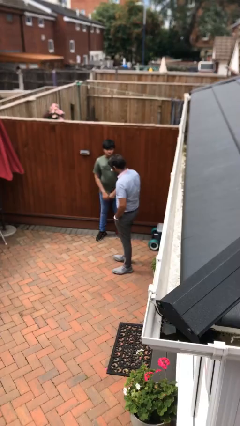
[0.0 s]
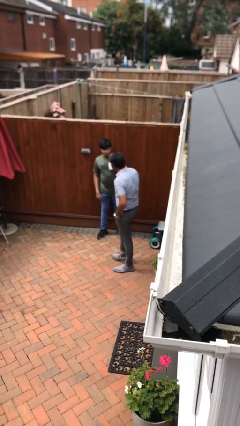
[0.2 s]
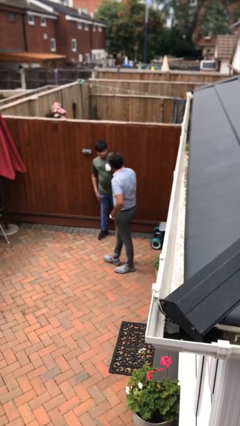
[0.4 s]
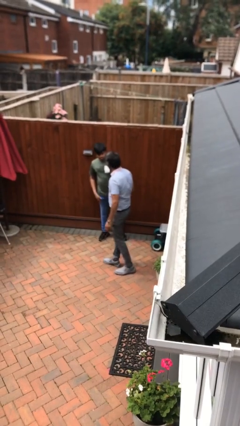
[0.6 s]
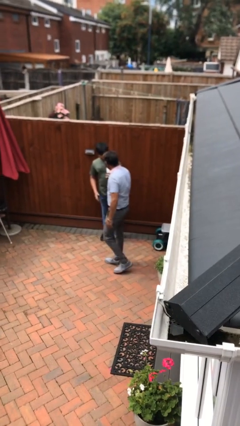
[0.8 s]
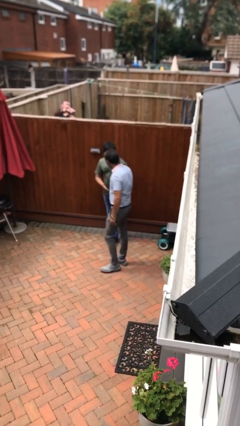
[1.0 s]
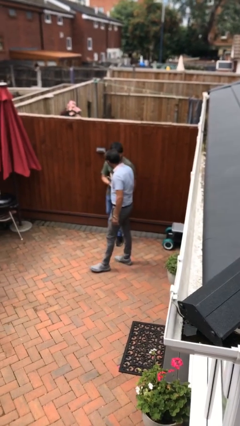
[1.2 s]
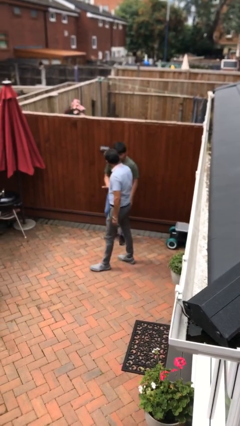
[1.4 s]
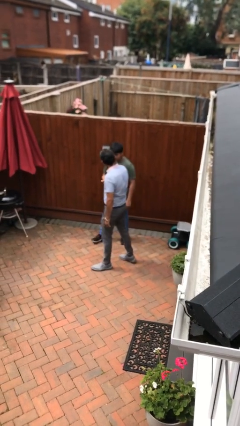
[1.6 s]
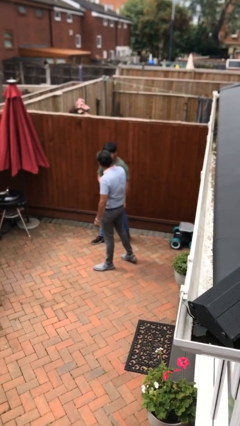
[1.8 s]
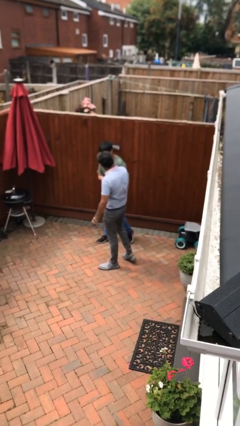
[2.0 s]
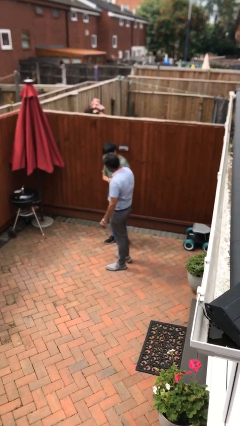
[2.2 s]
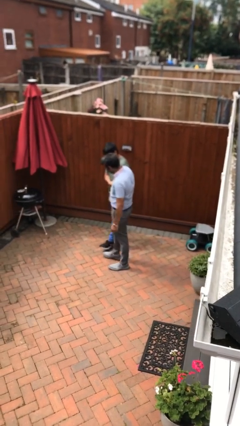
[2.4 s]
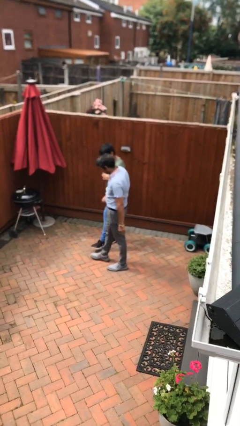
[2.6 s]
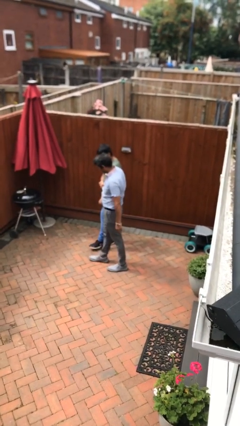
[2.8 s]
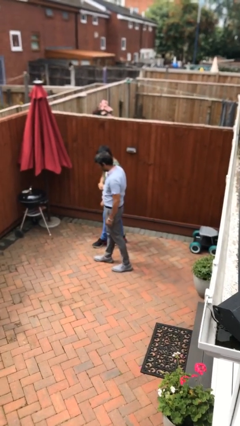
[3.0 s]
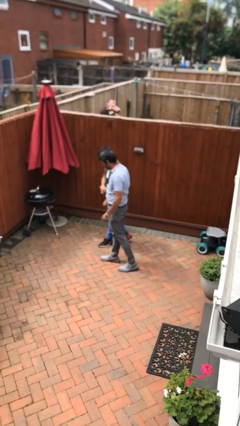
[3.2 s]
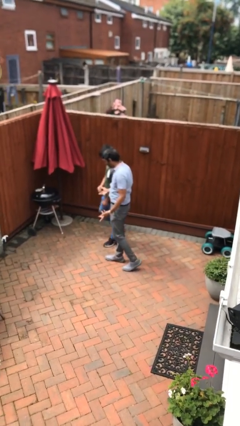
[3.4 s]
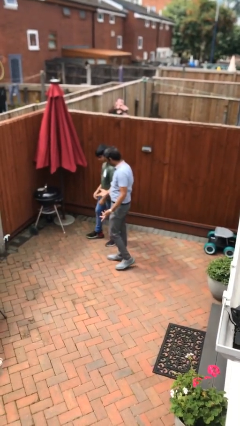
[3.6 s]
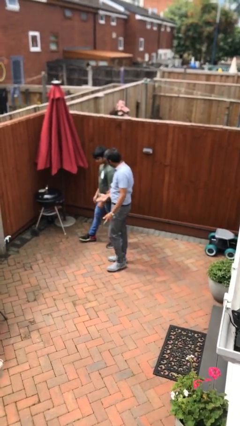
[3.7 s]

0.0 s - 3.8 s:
person shakes hand

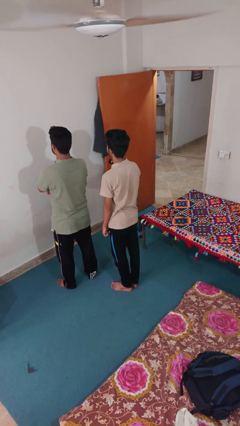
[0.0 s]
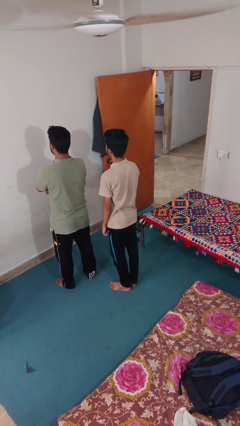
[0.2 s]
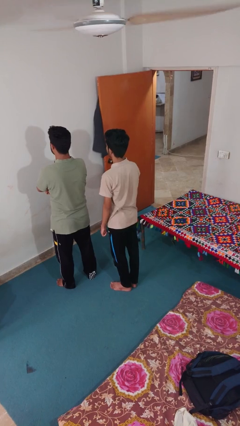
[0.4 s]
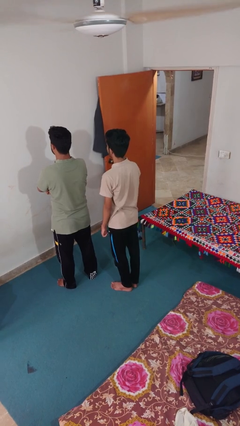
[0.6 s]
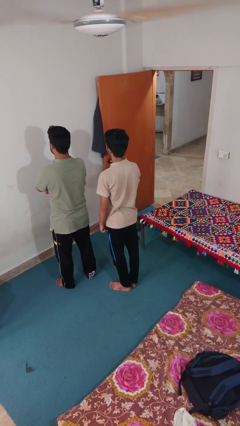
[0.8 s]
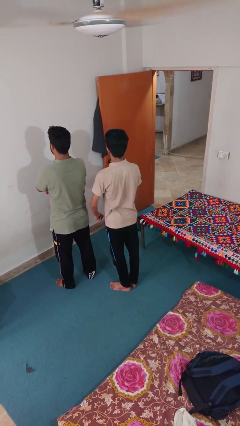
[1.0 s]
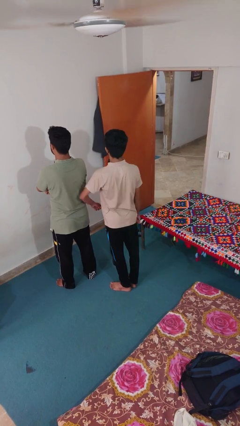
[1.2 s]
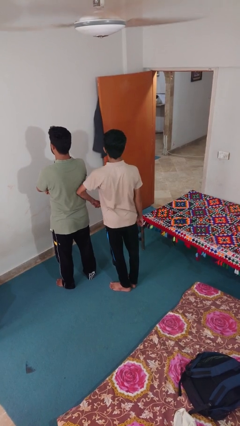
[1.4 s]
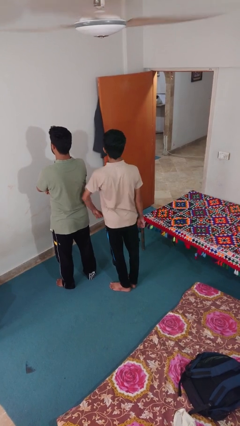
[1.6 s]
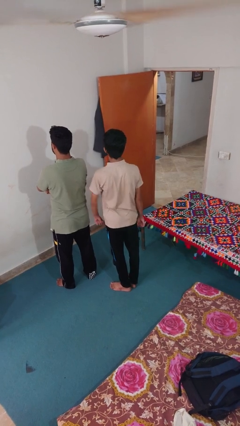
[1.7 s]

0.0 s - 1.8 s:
person nudges person with elbow

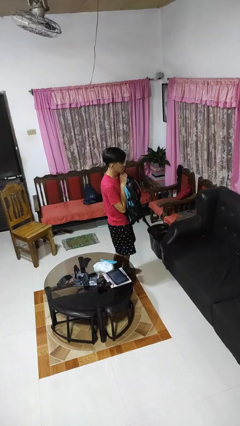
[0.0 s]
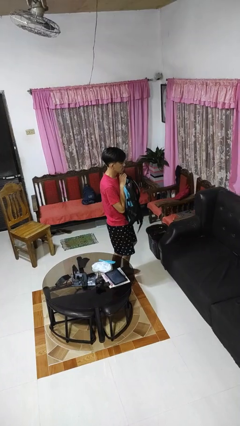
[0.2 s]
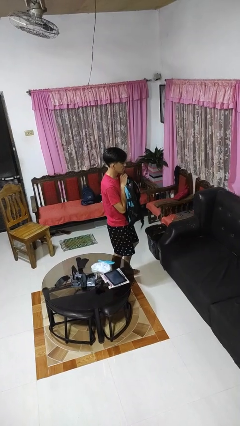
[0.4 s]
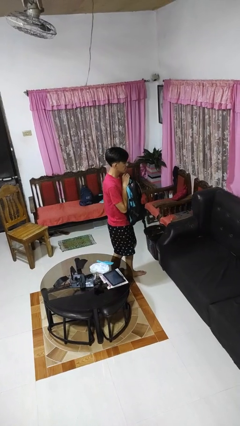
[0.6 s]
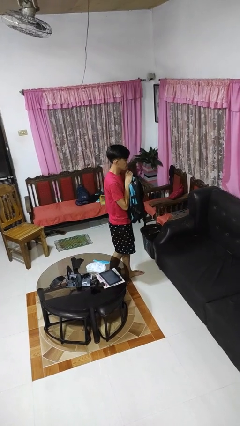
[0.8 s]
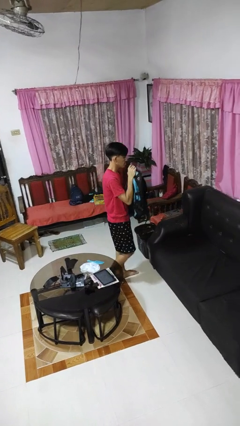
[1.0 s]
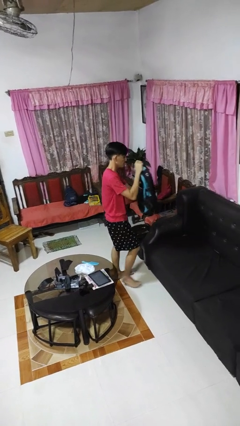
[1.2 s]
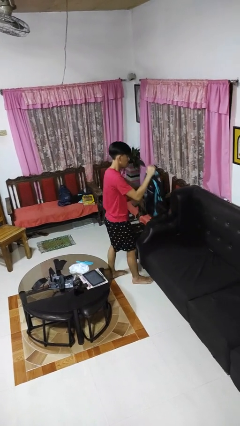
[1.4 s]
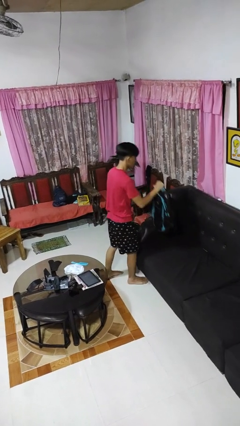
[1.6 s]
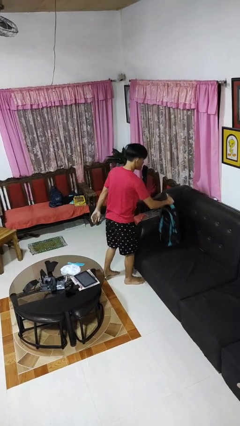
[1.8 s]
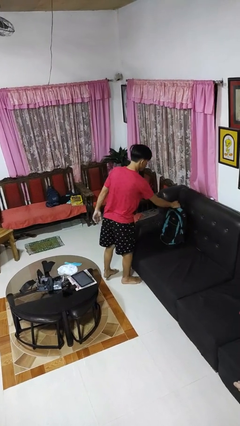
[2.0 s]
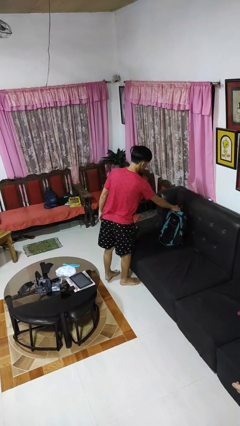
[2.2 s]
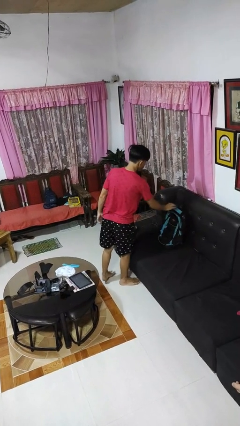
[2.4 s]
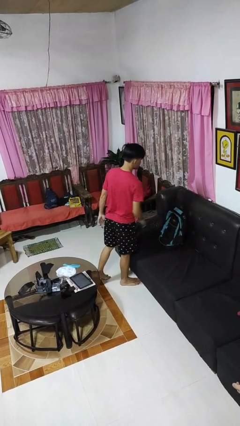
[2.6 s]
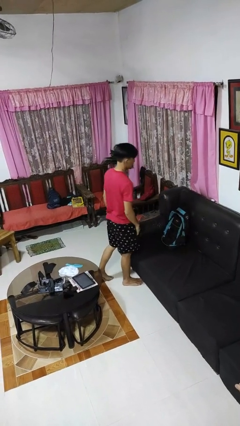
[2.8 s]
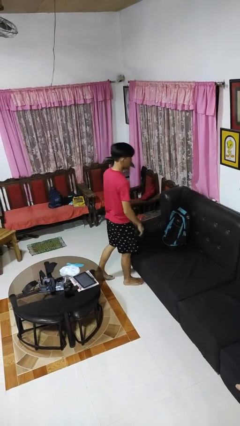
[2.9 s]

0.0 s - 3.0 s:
person puts down object on couch

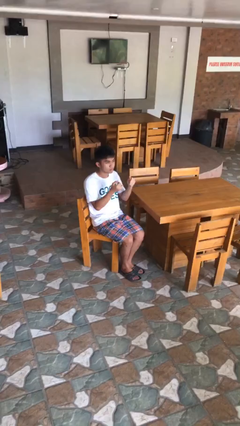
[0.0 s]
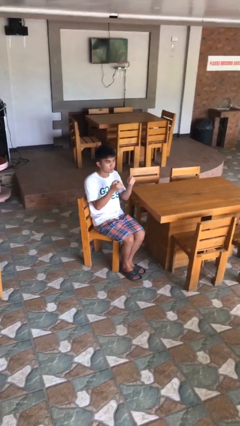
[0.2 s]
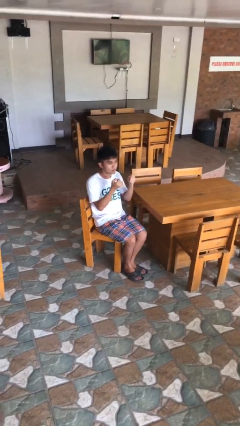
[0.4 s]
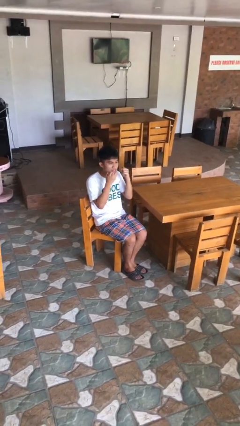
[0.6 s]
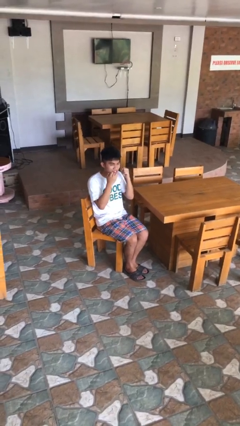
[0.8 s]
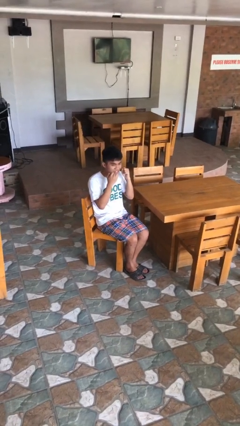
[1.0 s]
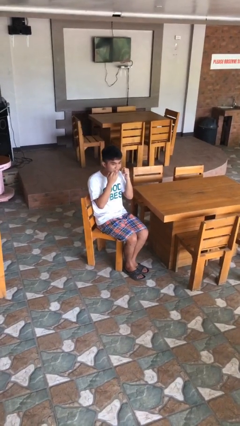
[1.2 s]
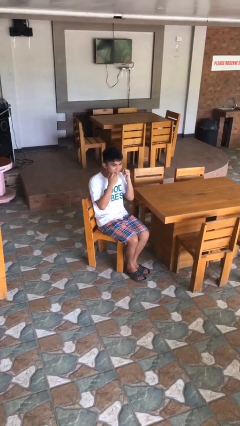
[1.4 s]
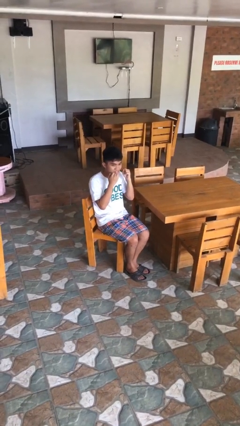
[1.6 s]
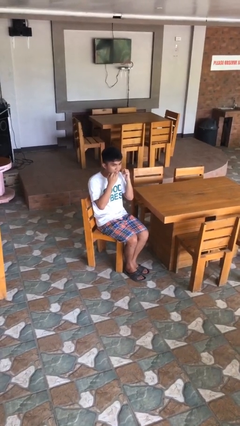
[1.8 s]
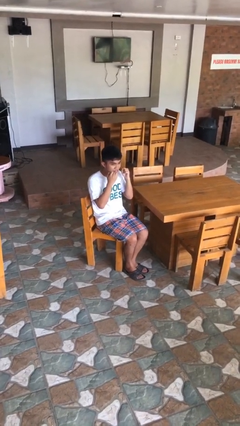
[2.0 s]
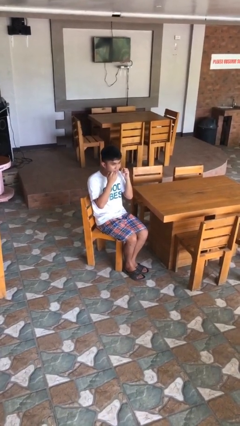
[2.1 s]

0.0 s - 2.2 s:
person flosses

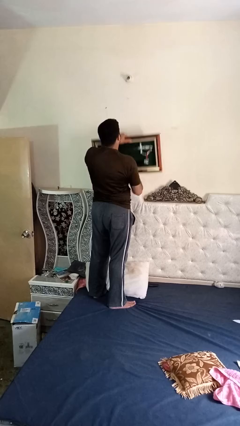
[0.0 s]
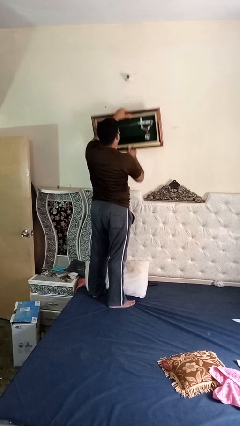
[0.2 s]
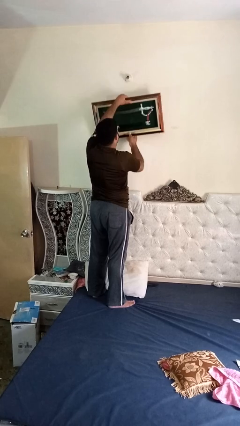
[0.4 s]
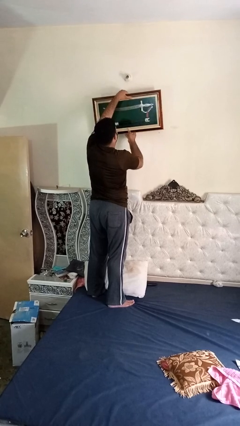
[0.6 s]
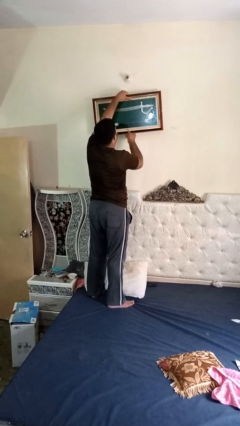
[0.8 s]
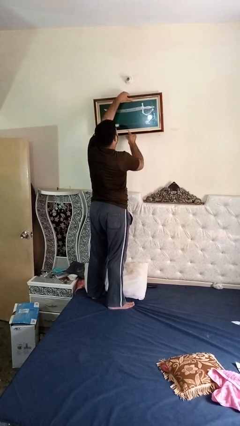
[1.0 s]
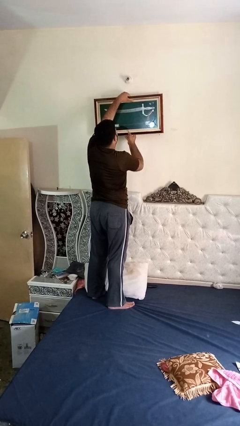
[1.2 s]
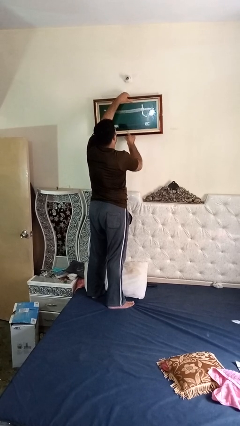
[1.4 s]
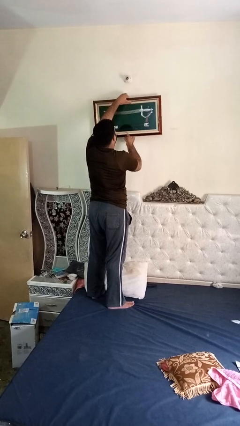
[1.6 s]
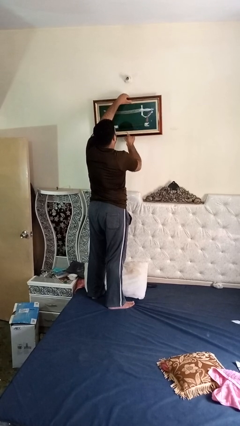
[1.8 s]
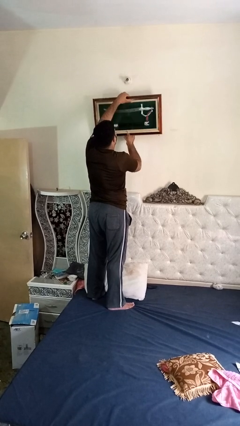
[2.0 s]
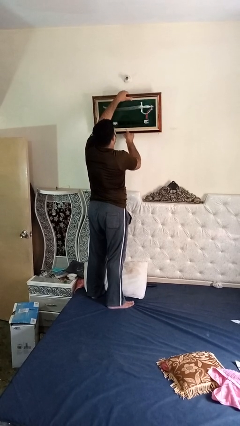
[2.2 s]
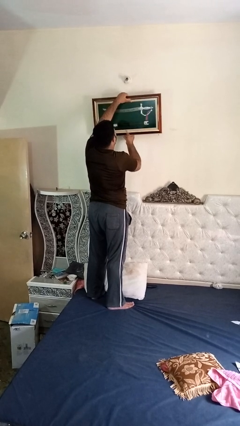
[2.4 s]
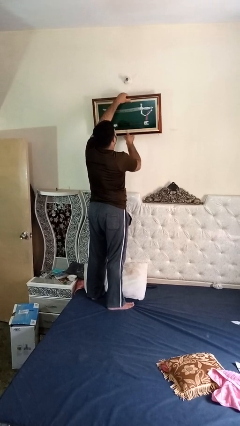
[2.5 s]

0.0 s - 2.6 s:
person puts up picture frame

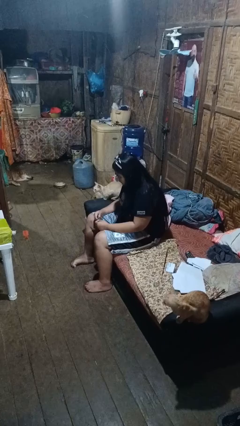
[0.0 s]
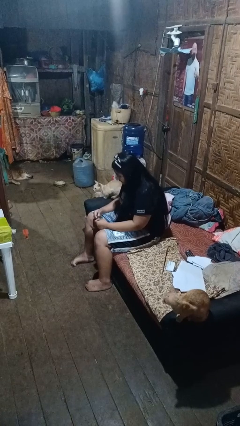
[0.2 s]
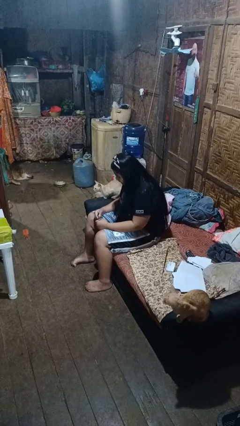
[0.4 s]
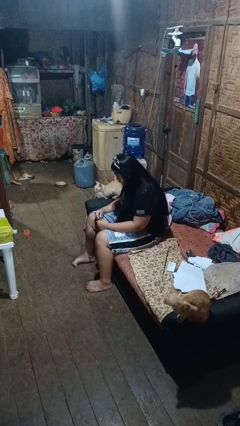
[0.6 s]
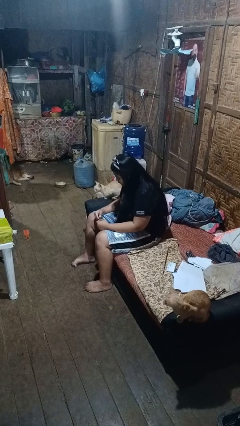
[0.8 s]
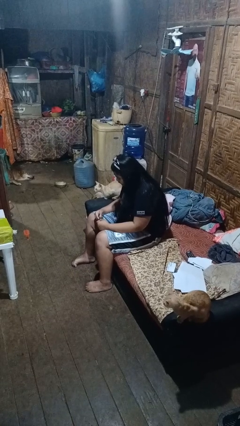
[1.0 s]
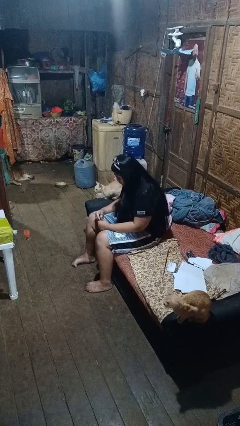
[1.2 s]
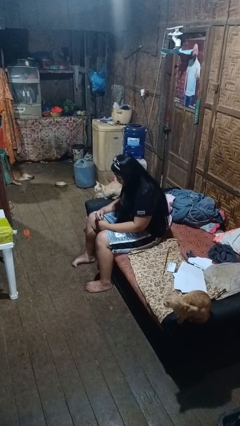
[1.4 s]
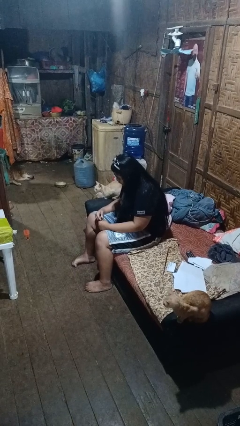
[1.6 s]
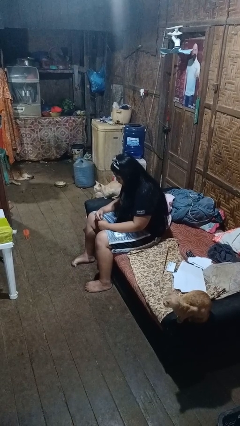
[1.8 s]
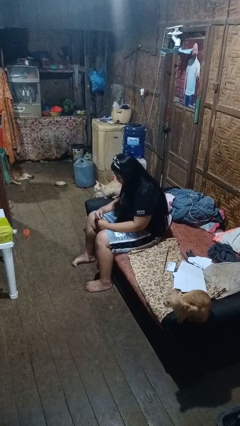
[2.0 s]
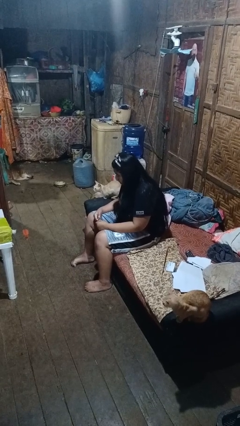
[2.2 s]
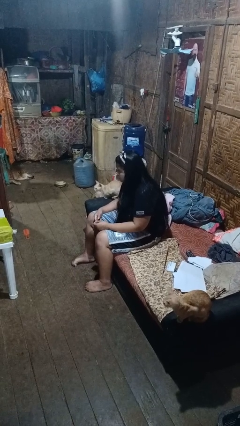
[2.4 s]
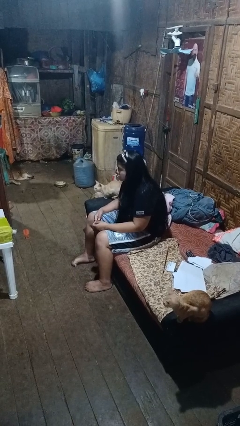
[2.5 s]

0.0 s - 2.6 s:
person clips fingernails

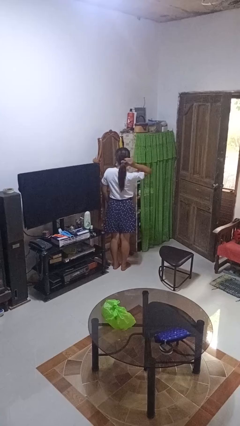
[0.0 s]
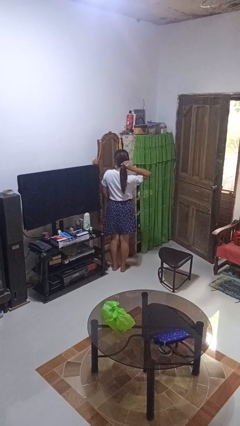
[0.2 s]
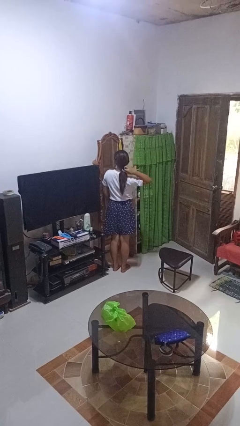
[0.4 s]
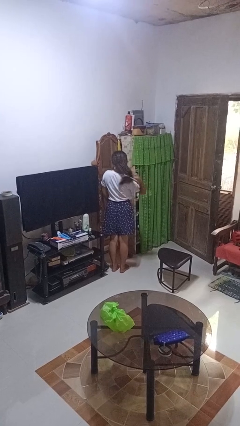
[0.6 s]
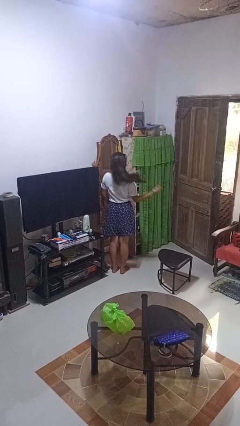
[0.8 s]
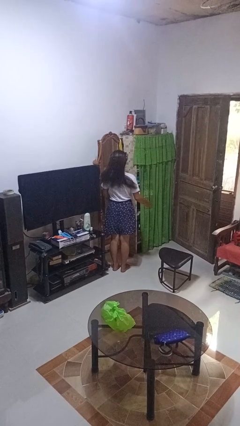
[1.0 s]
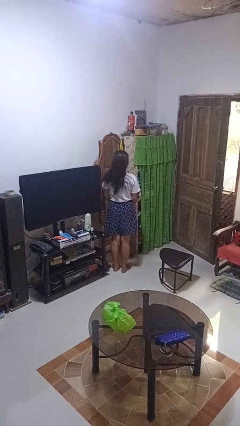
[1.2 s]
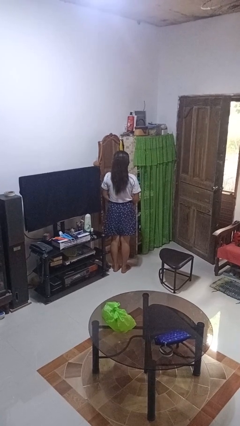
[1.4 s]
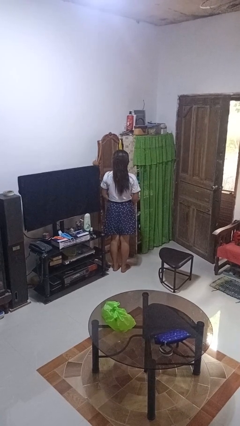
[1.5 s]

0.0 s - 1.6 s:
person takes off hairtie
